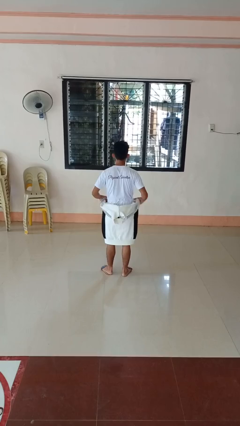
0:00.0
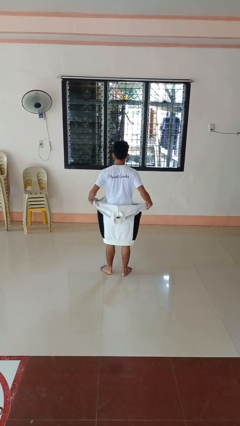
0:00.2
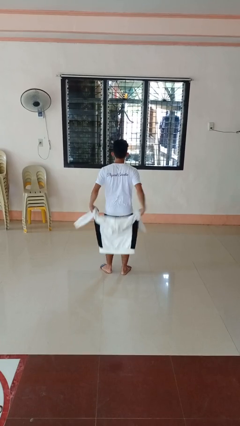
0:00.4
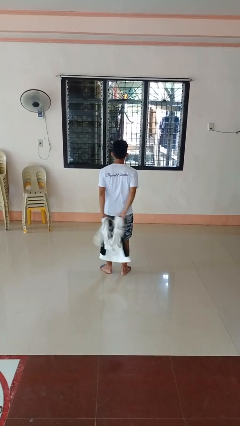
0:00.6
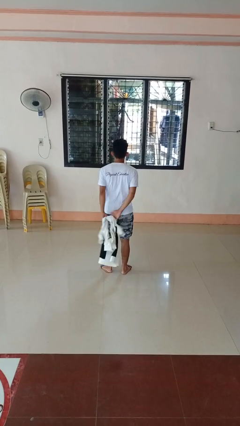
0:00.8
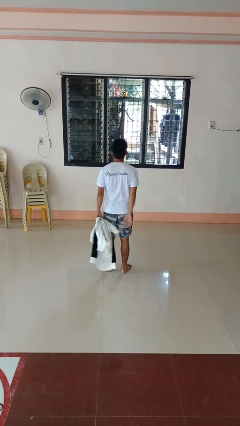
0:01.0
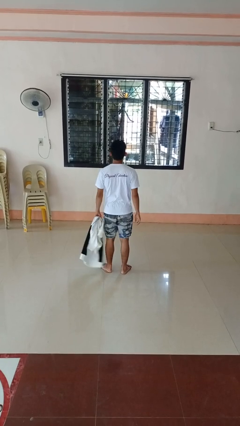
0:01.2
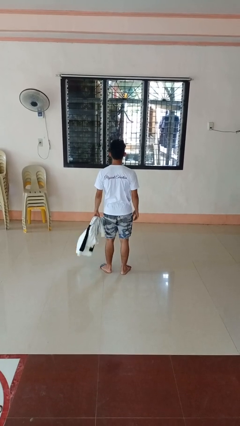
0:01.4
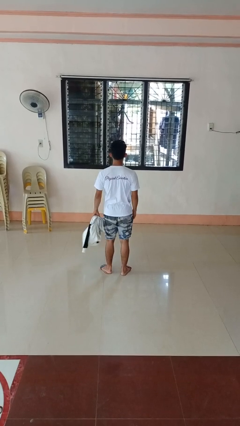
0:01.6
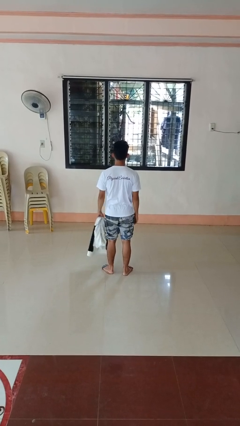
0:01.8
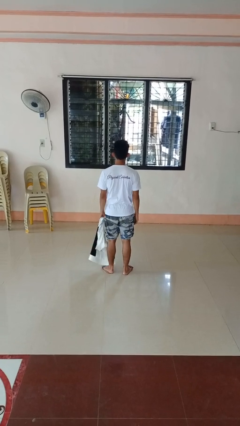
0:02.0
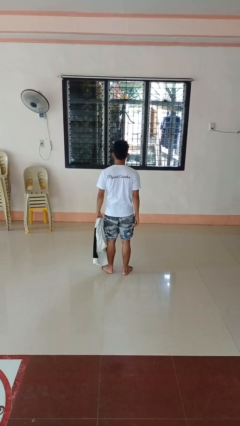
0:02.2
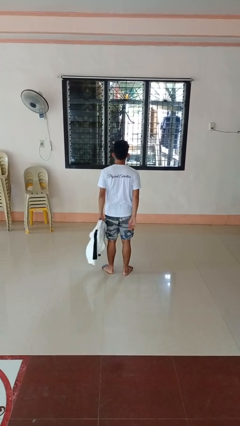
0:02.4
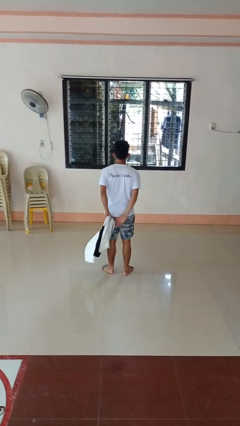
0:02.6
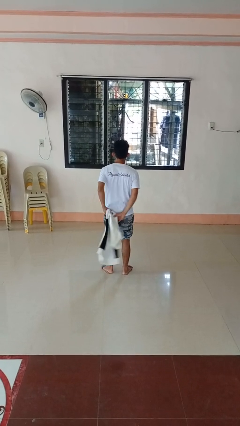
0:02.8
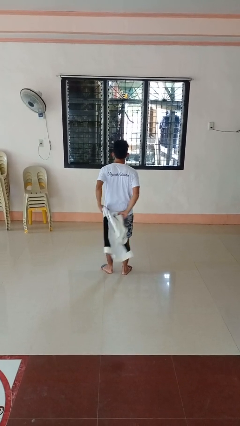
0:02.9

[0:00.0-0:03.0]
person unties jacket around waist

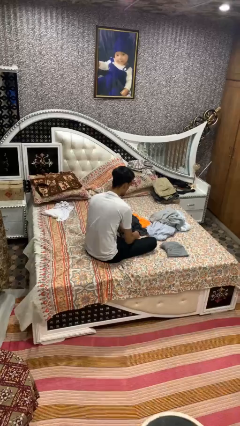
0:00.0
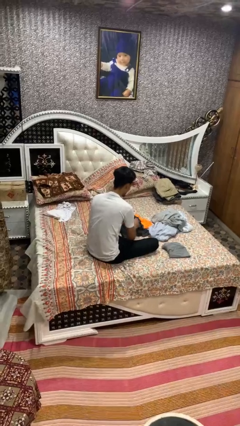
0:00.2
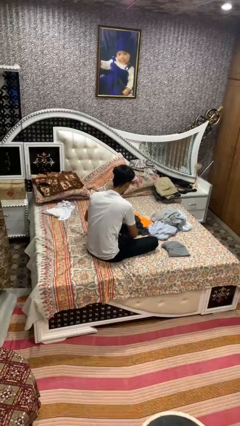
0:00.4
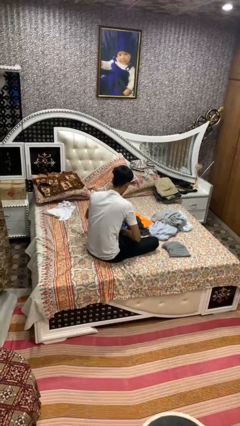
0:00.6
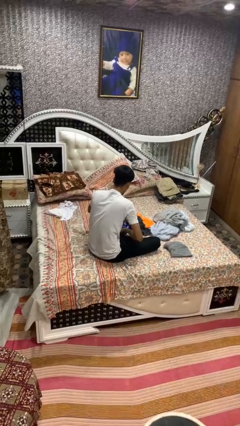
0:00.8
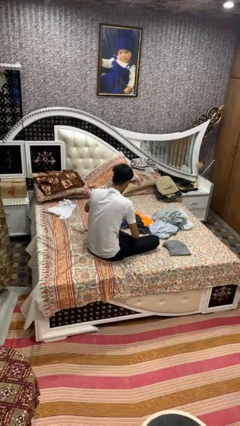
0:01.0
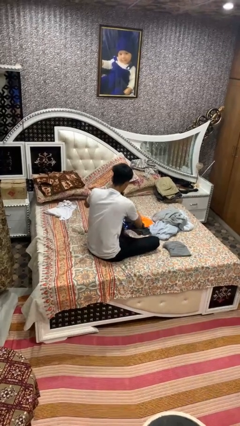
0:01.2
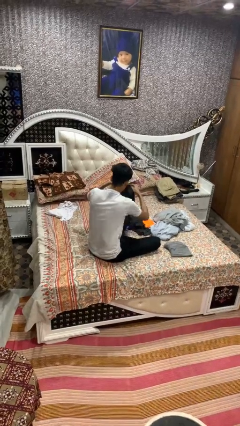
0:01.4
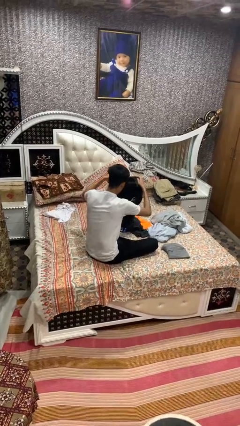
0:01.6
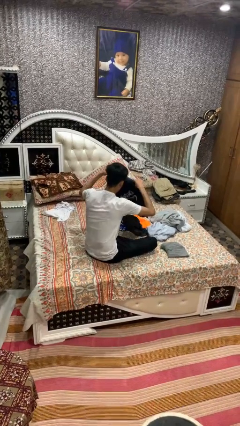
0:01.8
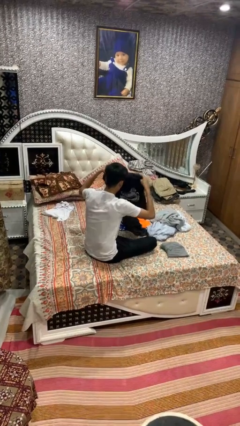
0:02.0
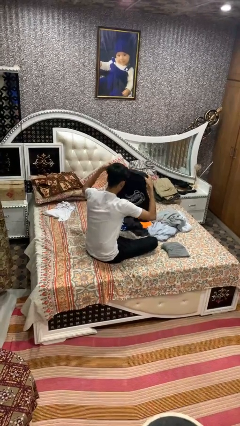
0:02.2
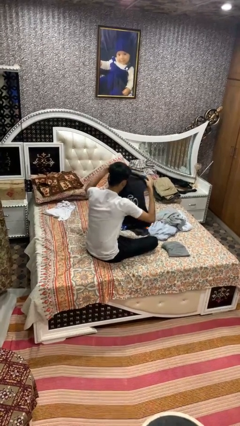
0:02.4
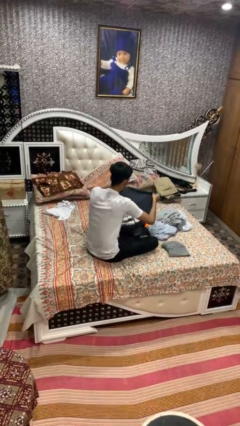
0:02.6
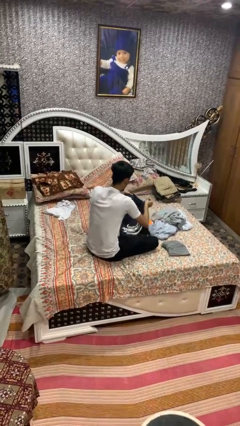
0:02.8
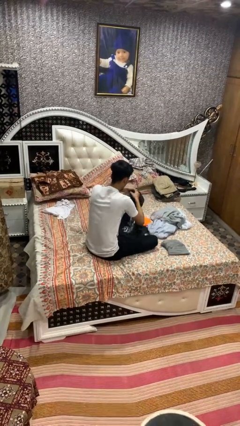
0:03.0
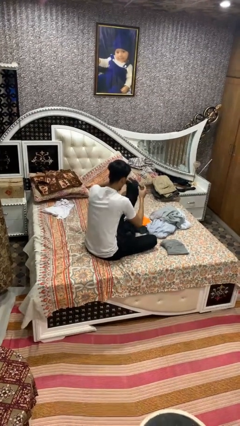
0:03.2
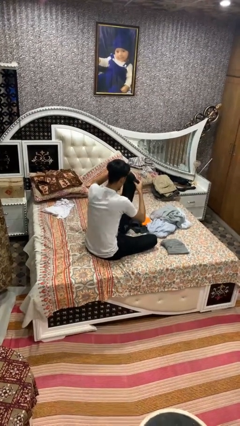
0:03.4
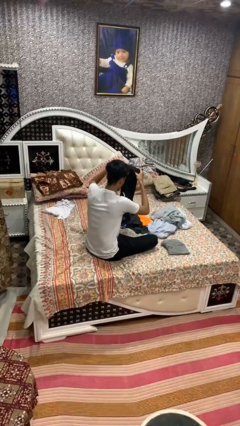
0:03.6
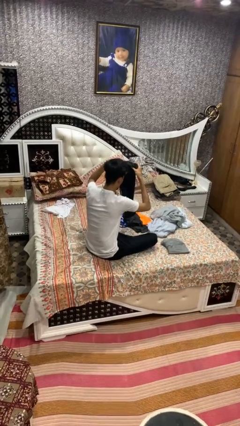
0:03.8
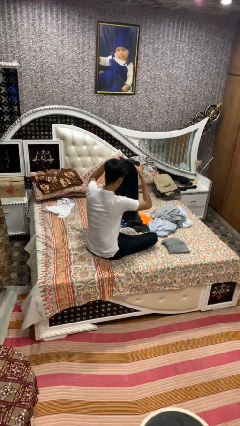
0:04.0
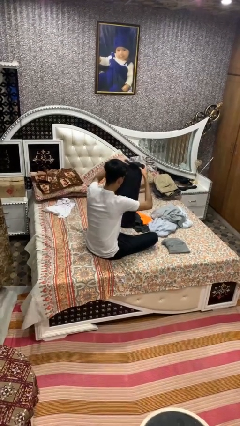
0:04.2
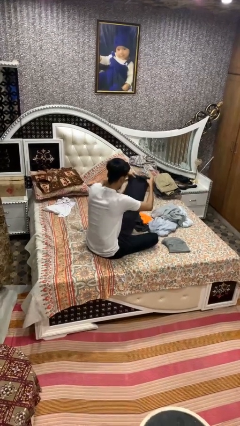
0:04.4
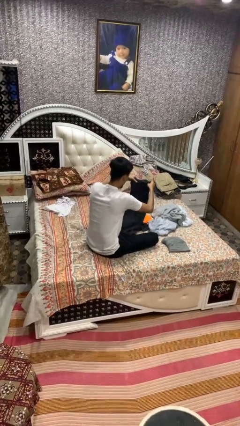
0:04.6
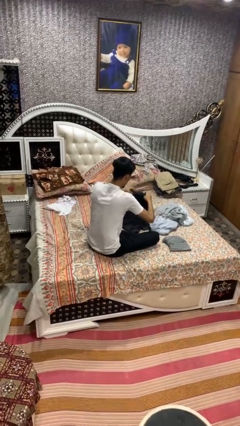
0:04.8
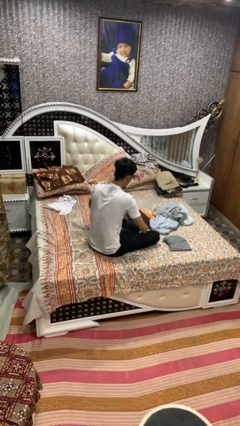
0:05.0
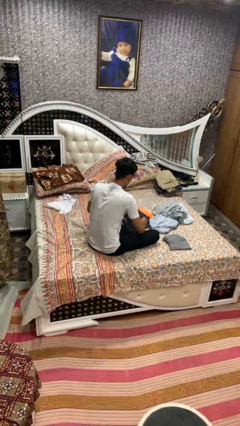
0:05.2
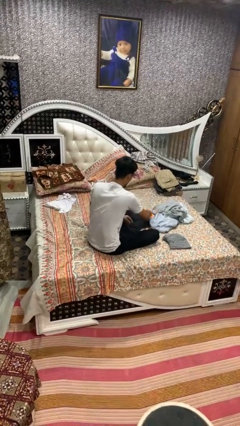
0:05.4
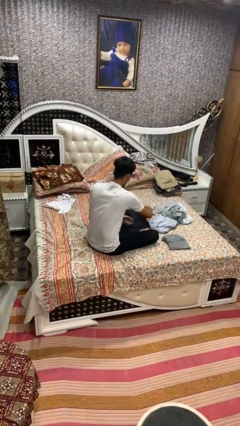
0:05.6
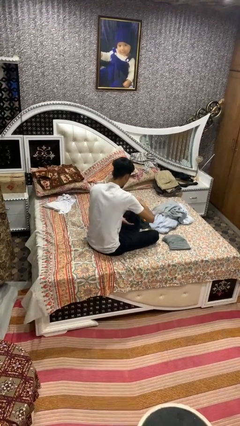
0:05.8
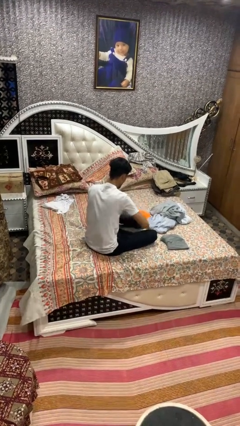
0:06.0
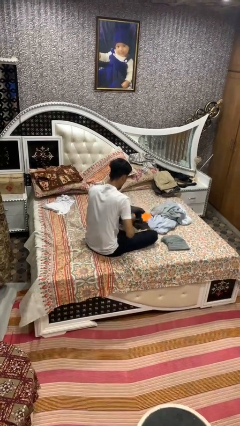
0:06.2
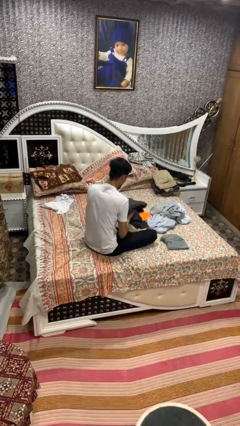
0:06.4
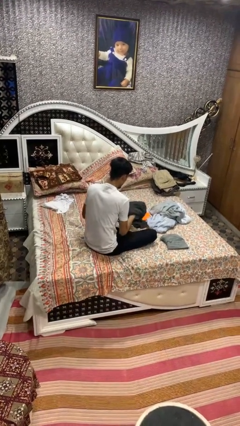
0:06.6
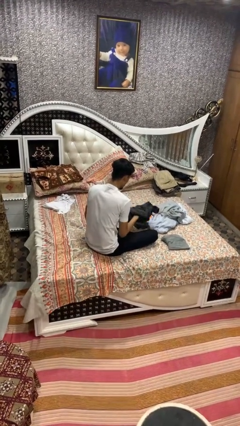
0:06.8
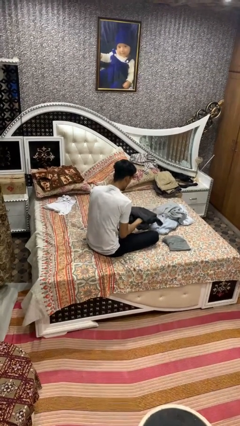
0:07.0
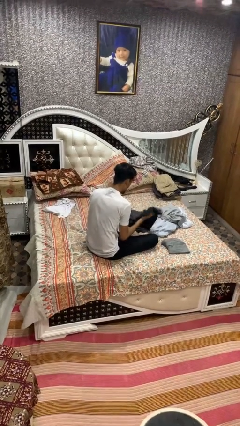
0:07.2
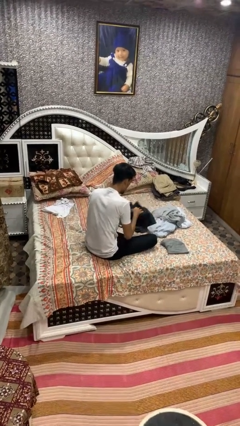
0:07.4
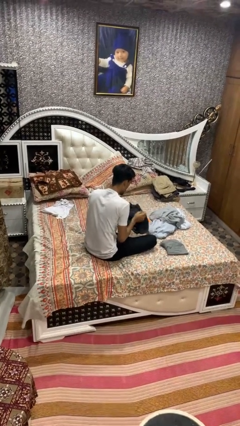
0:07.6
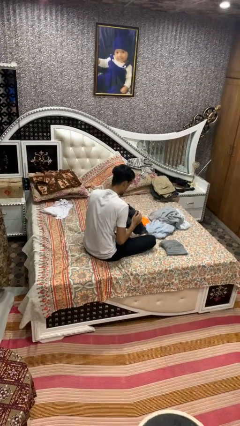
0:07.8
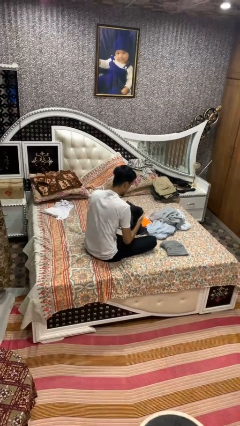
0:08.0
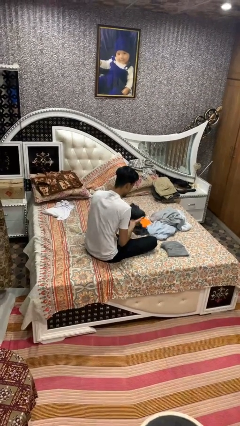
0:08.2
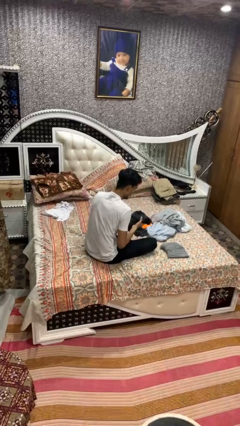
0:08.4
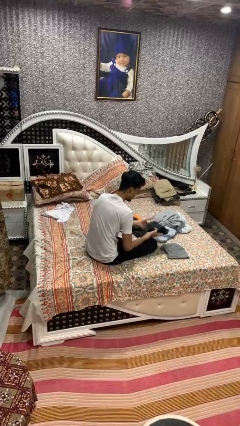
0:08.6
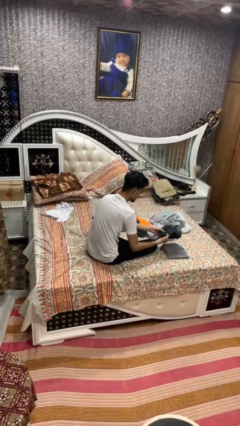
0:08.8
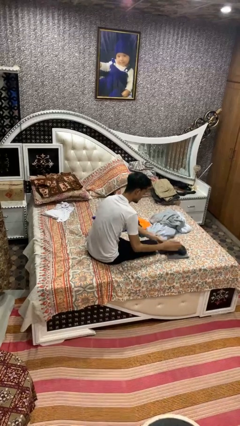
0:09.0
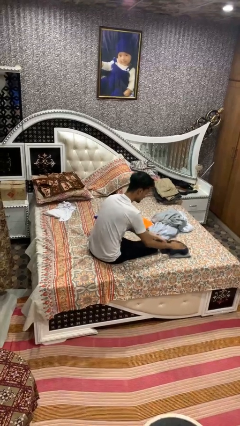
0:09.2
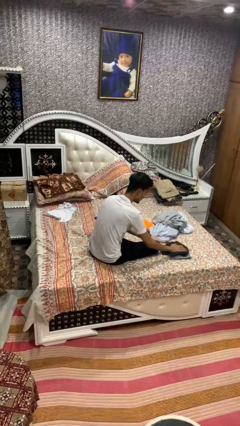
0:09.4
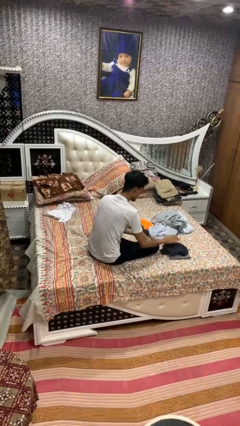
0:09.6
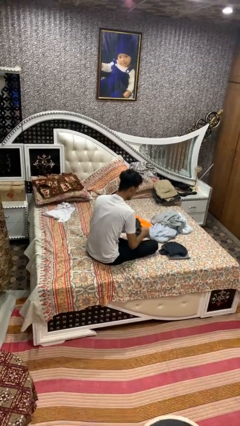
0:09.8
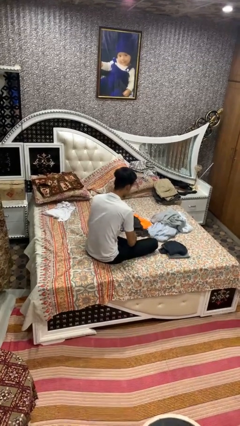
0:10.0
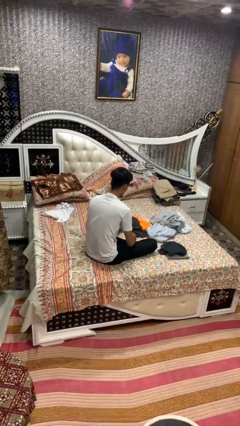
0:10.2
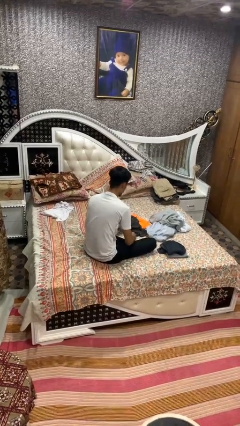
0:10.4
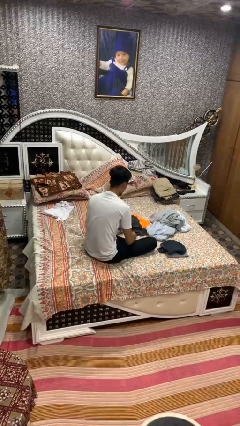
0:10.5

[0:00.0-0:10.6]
person folds shirt

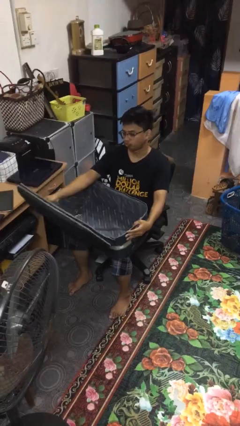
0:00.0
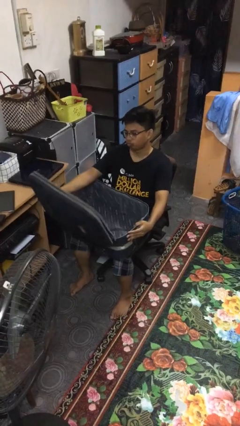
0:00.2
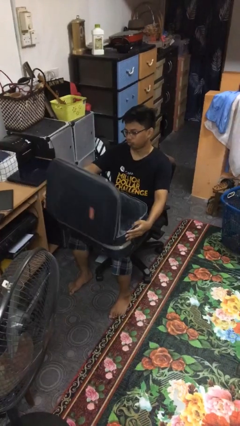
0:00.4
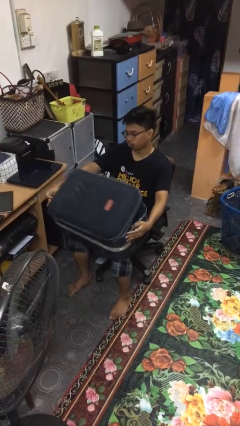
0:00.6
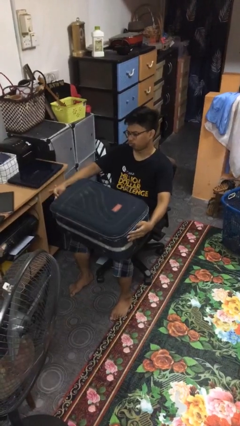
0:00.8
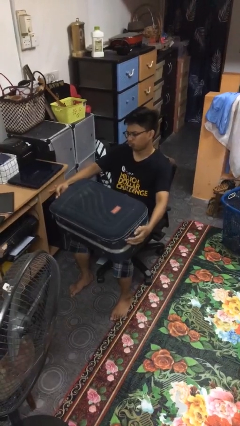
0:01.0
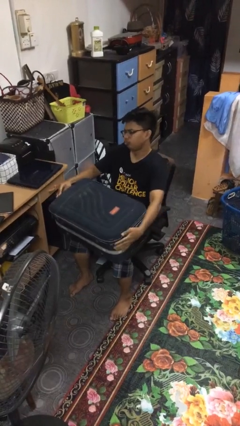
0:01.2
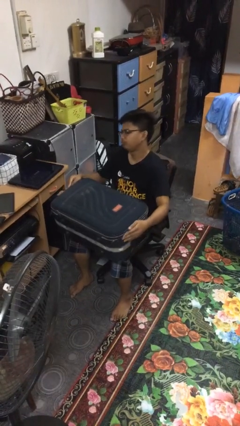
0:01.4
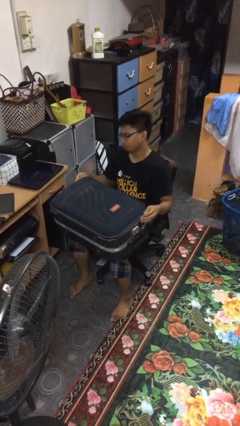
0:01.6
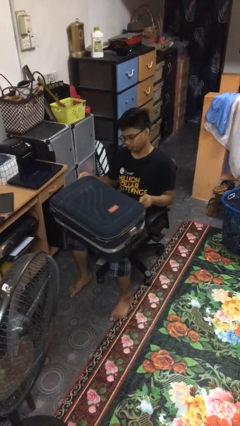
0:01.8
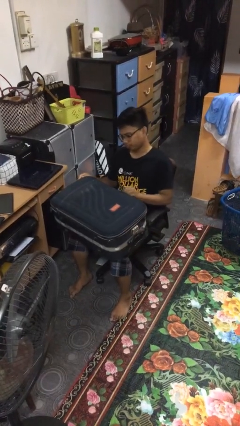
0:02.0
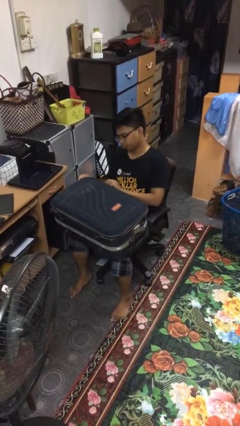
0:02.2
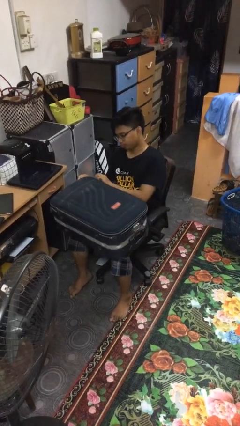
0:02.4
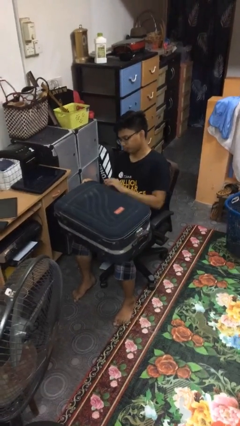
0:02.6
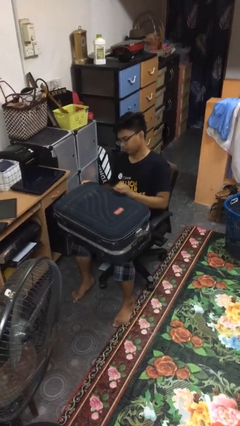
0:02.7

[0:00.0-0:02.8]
person closes suitcase

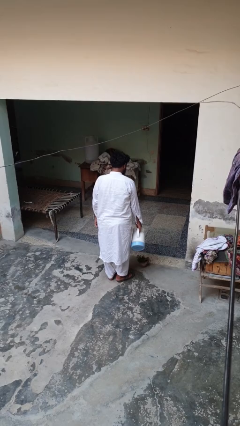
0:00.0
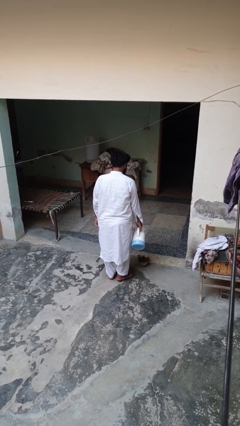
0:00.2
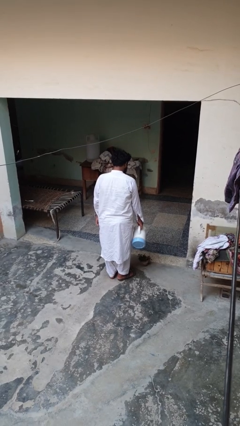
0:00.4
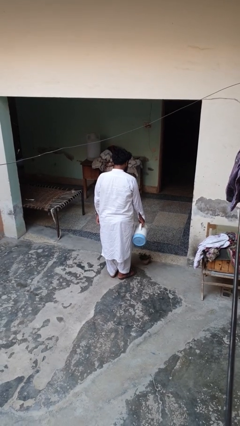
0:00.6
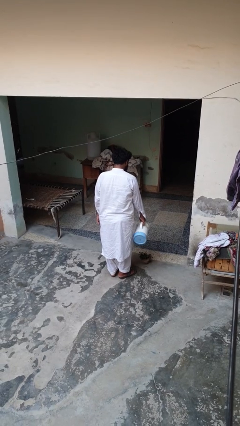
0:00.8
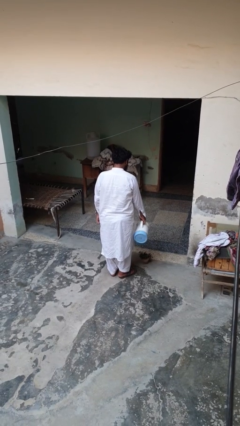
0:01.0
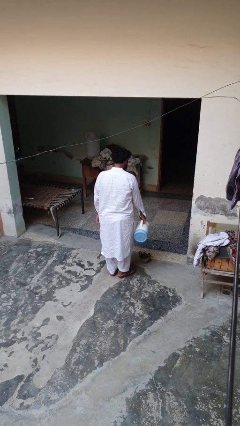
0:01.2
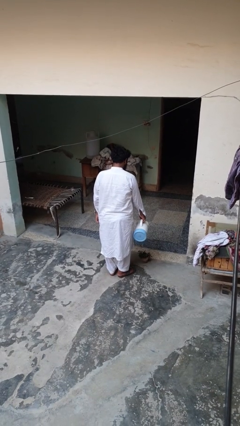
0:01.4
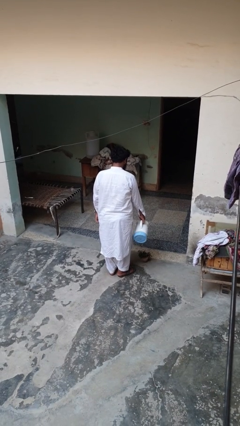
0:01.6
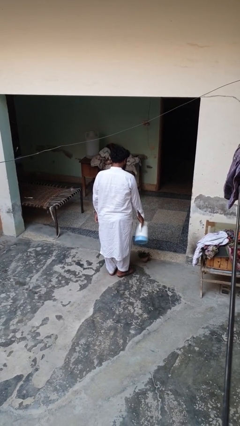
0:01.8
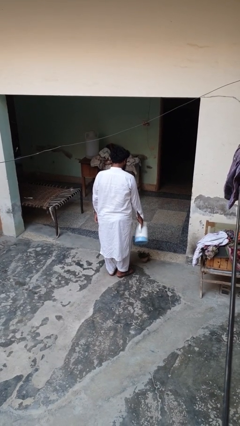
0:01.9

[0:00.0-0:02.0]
person waters houseplant
